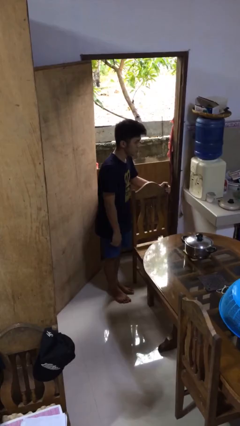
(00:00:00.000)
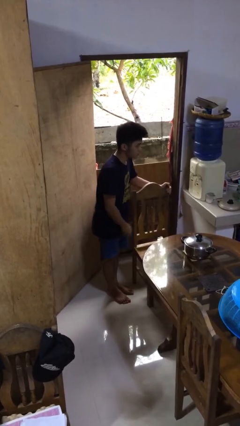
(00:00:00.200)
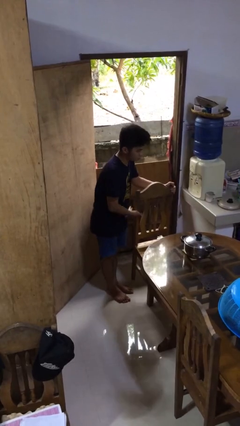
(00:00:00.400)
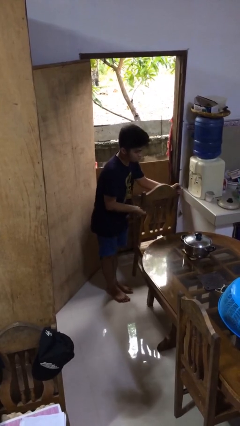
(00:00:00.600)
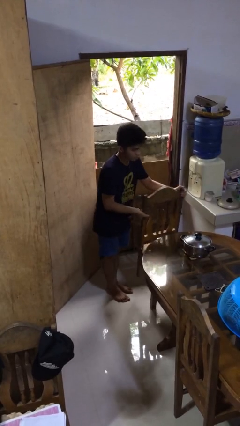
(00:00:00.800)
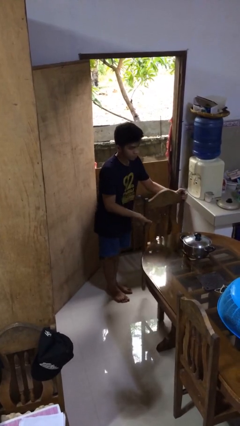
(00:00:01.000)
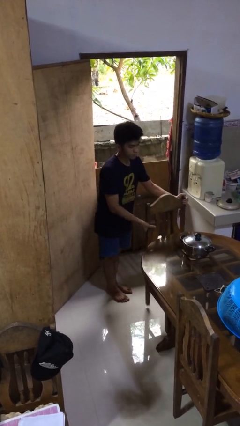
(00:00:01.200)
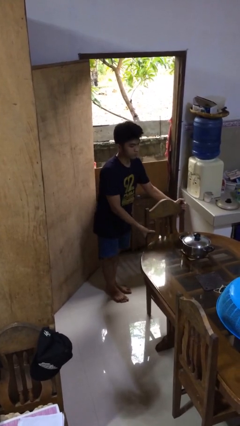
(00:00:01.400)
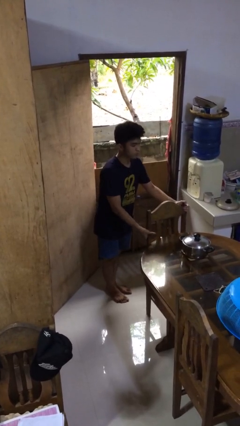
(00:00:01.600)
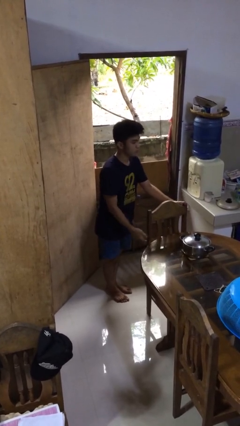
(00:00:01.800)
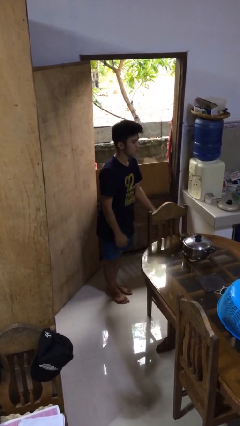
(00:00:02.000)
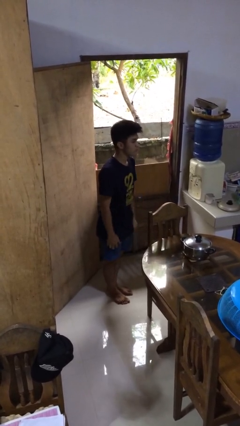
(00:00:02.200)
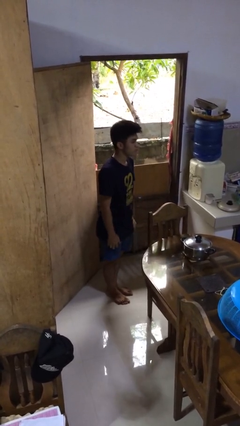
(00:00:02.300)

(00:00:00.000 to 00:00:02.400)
person pushes in chair

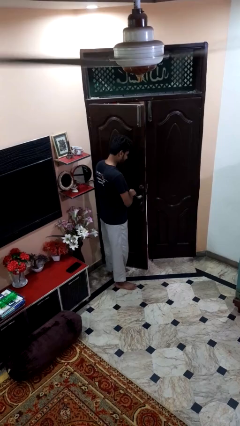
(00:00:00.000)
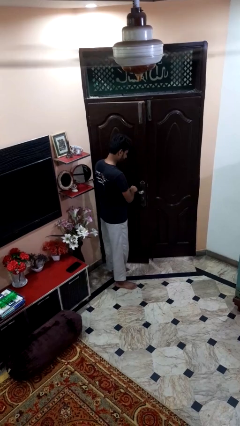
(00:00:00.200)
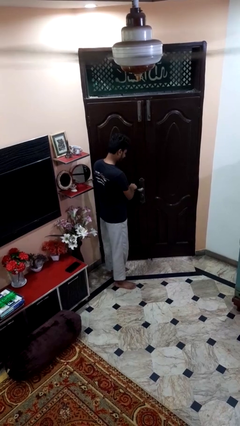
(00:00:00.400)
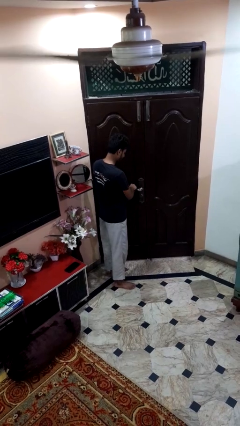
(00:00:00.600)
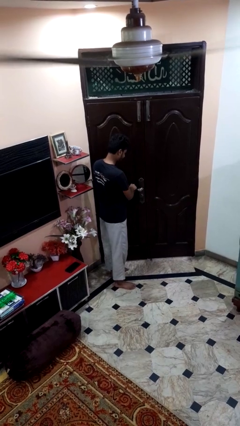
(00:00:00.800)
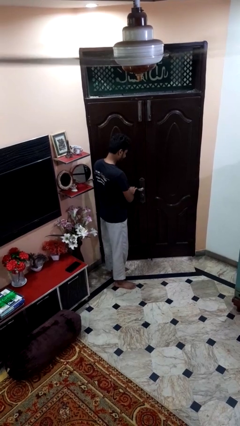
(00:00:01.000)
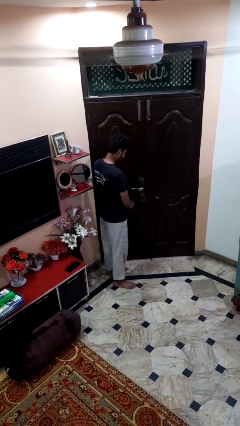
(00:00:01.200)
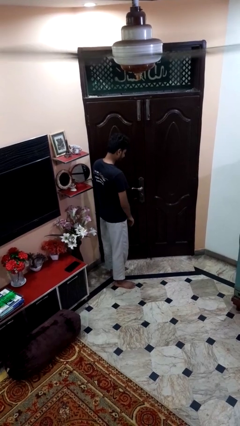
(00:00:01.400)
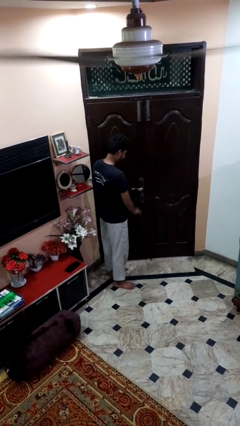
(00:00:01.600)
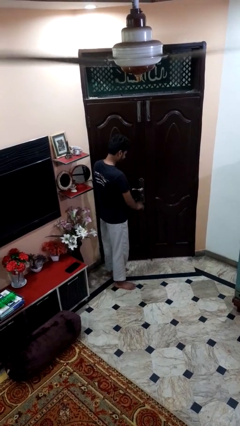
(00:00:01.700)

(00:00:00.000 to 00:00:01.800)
person closes facility door

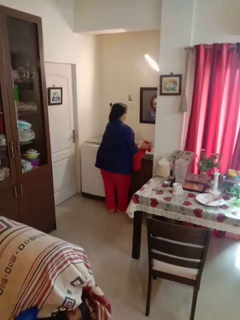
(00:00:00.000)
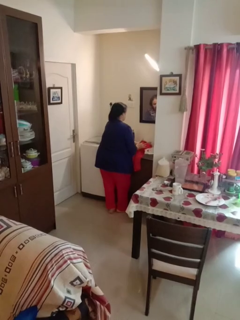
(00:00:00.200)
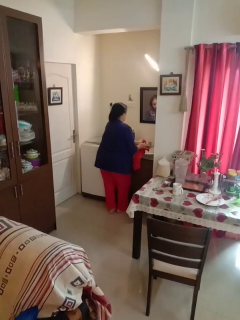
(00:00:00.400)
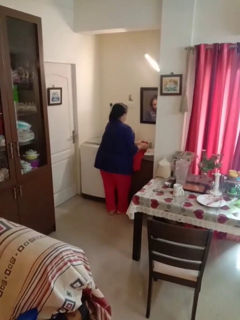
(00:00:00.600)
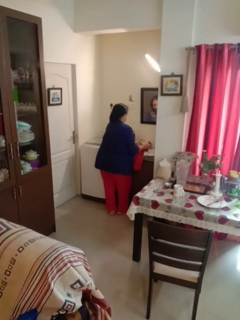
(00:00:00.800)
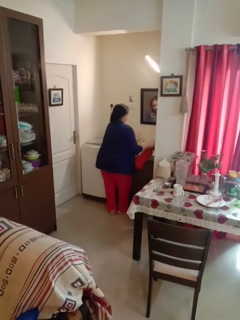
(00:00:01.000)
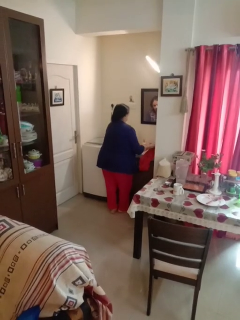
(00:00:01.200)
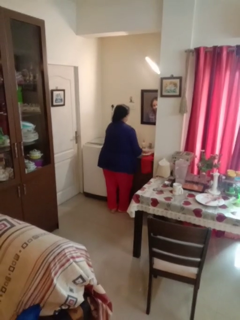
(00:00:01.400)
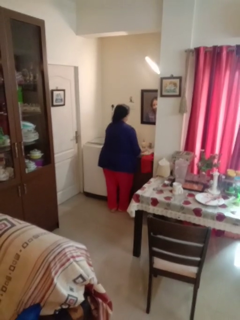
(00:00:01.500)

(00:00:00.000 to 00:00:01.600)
person dries hands with towel

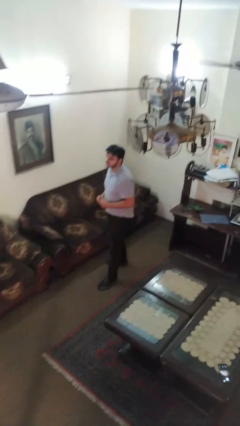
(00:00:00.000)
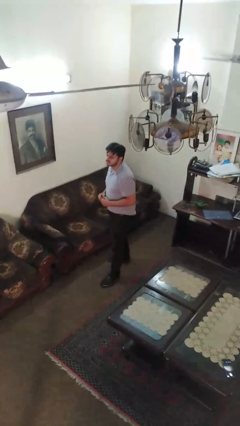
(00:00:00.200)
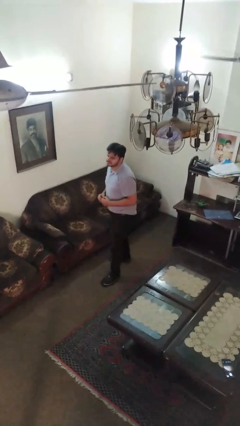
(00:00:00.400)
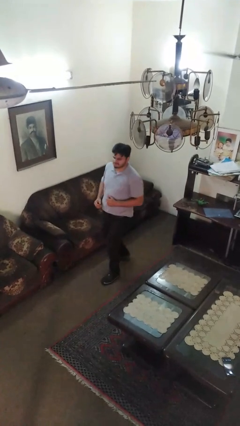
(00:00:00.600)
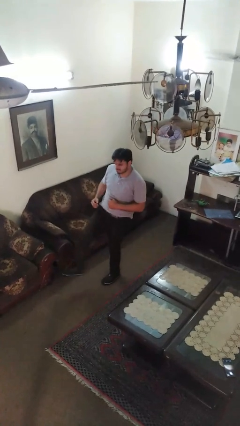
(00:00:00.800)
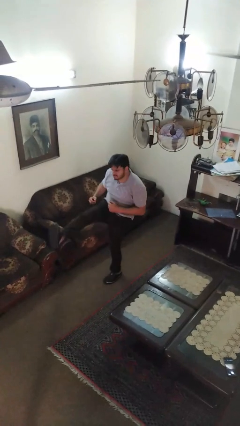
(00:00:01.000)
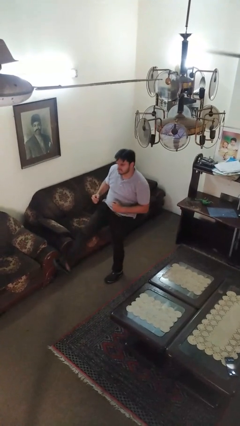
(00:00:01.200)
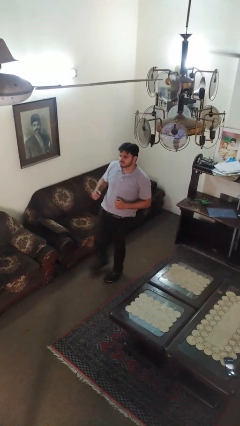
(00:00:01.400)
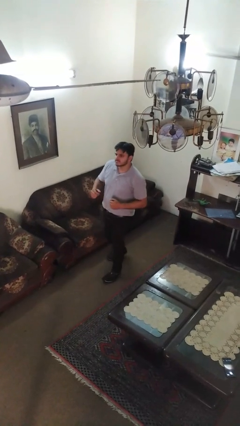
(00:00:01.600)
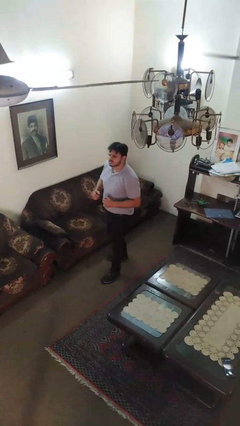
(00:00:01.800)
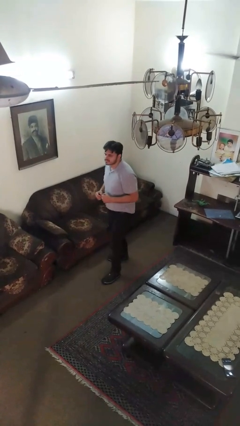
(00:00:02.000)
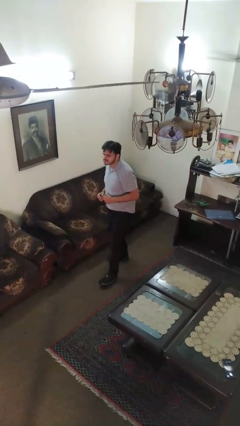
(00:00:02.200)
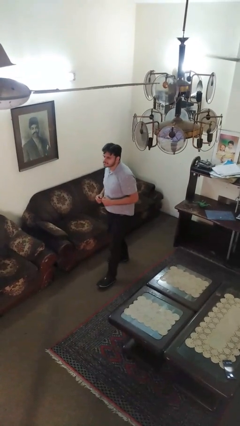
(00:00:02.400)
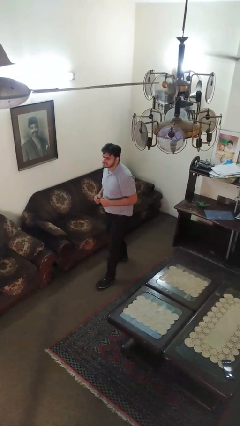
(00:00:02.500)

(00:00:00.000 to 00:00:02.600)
person karate kicks

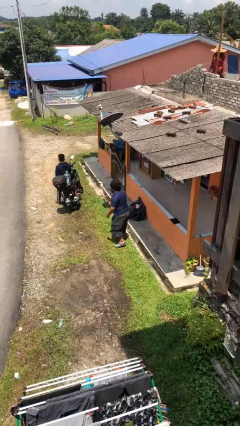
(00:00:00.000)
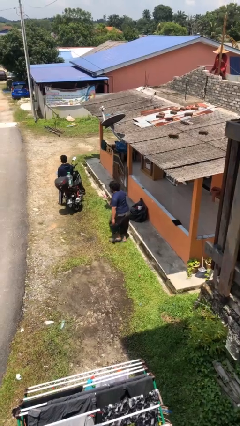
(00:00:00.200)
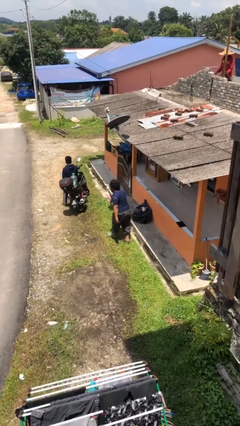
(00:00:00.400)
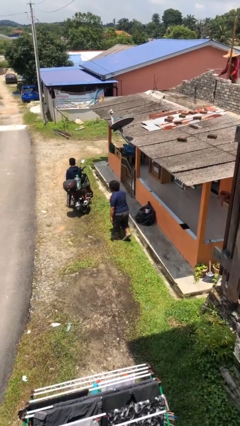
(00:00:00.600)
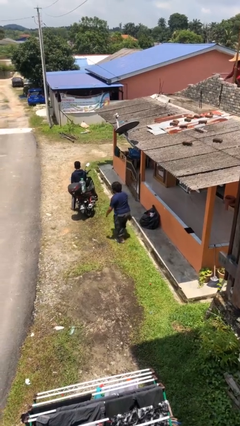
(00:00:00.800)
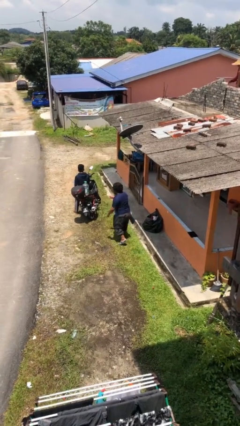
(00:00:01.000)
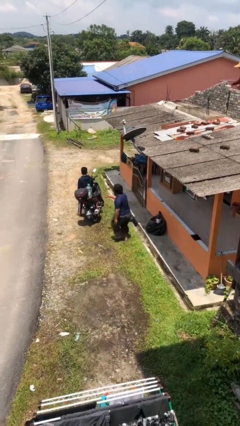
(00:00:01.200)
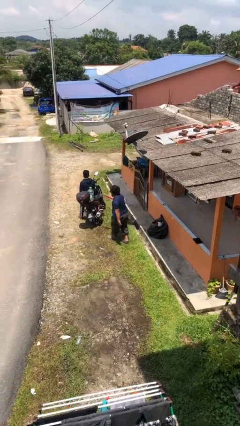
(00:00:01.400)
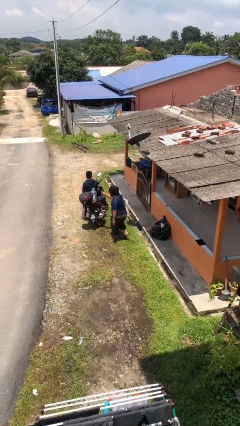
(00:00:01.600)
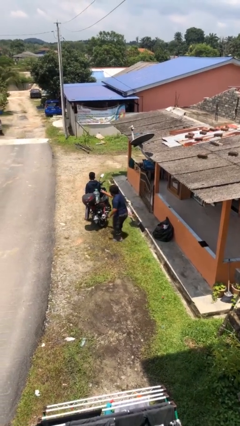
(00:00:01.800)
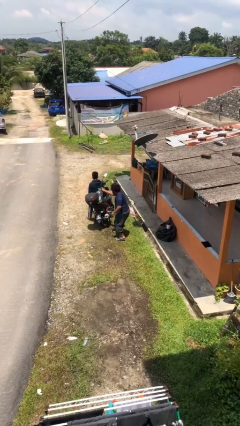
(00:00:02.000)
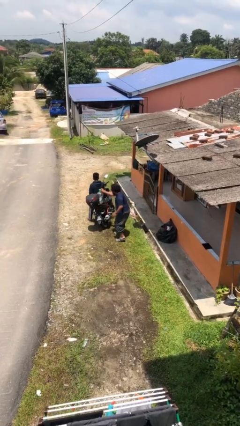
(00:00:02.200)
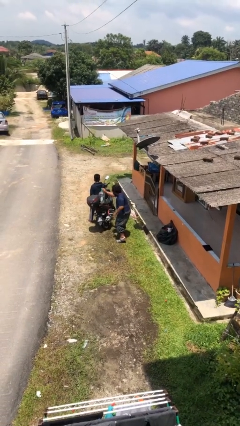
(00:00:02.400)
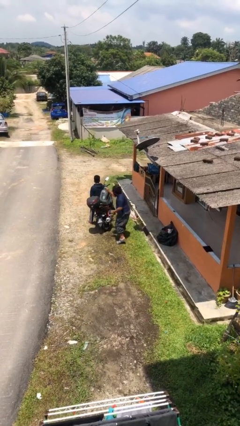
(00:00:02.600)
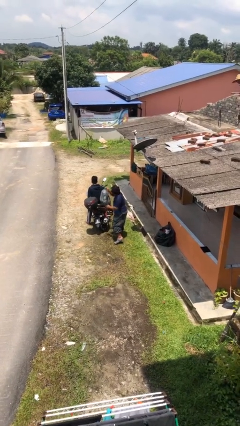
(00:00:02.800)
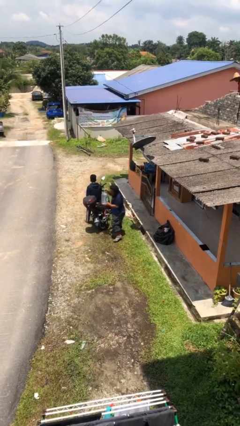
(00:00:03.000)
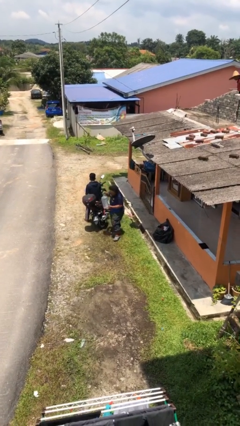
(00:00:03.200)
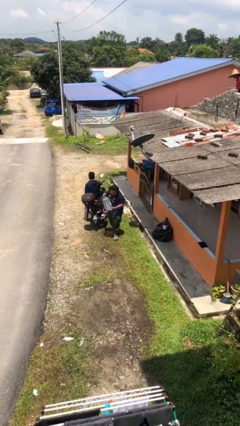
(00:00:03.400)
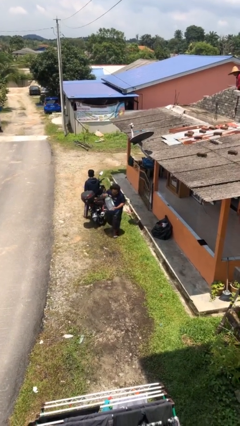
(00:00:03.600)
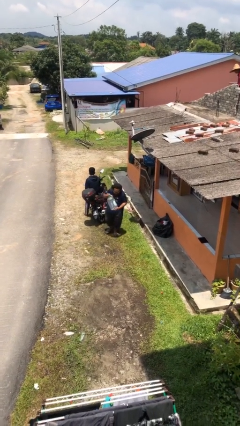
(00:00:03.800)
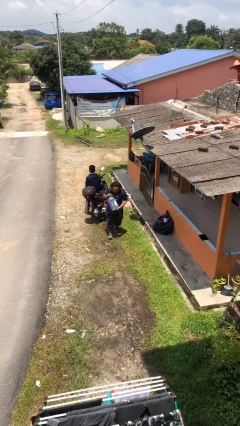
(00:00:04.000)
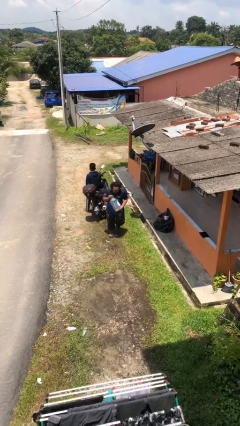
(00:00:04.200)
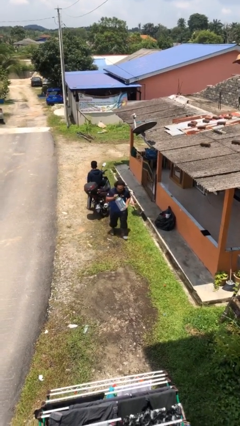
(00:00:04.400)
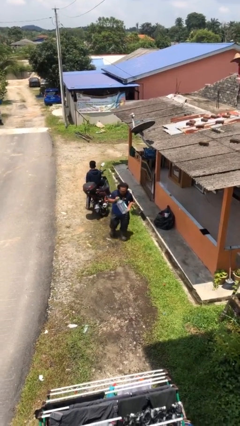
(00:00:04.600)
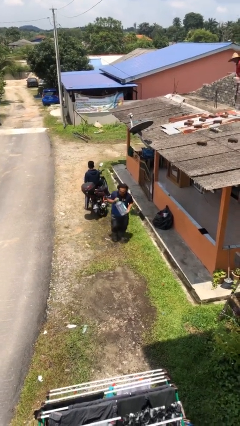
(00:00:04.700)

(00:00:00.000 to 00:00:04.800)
person steals object from person

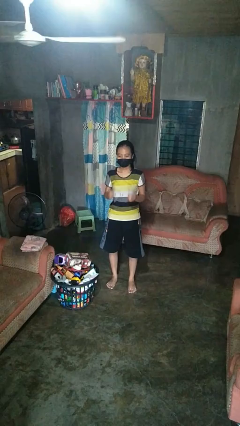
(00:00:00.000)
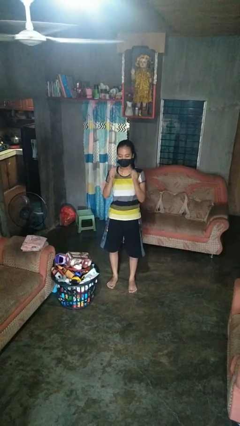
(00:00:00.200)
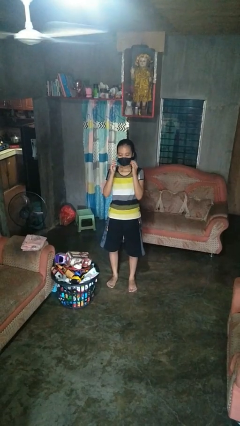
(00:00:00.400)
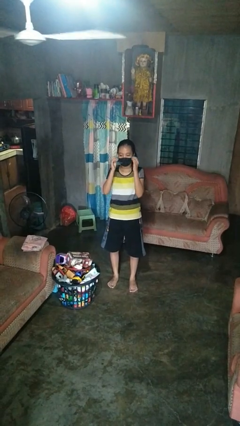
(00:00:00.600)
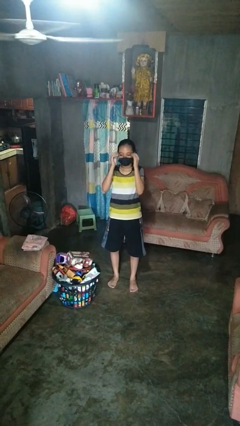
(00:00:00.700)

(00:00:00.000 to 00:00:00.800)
person puts on glasses

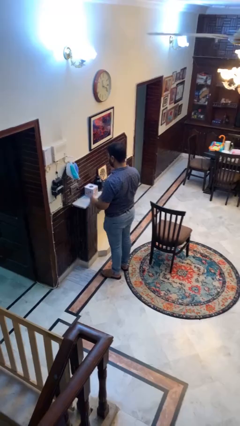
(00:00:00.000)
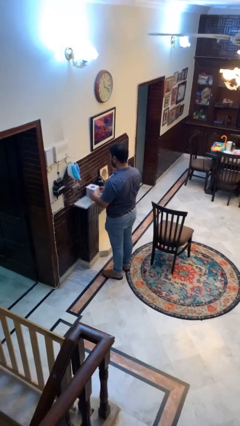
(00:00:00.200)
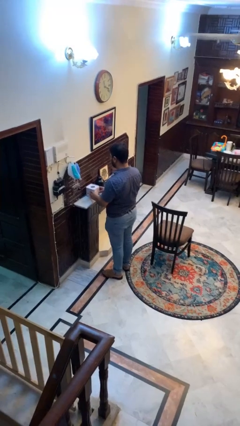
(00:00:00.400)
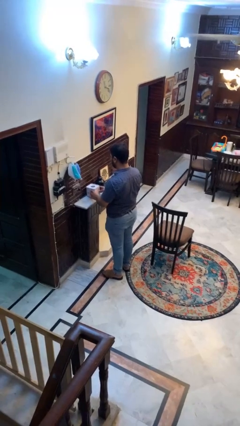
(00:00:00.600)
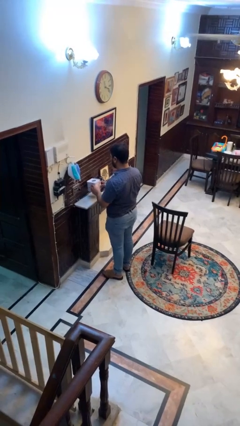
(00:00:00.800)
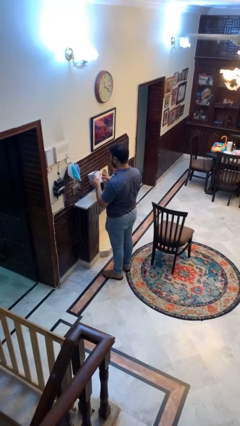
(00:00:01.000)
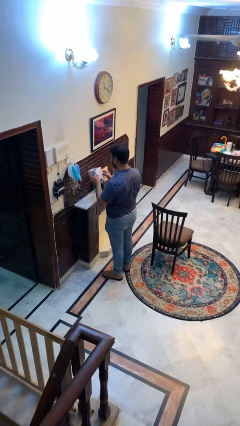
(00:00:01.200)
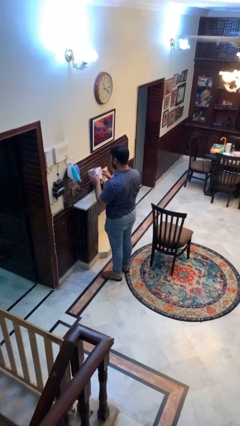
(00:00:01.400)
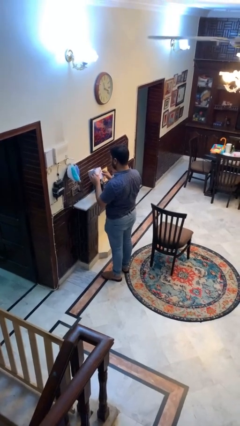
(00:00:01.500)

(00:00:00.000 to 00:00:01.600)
person picks up object from countertop

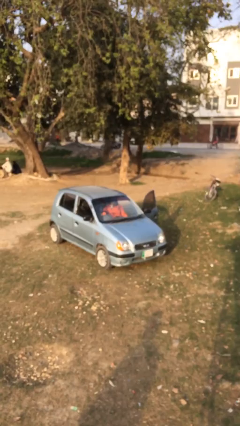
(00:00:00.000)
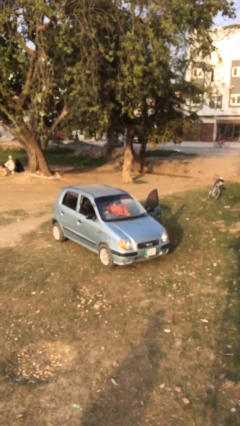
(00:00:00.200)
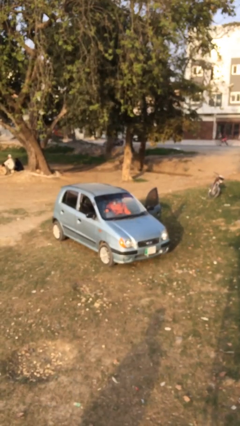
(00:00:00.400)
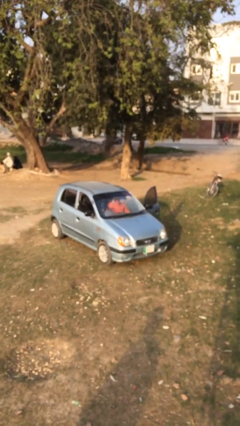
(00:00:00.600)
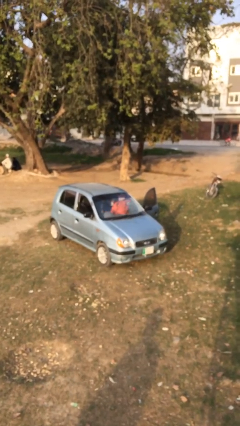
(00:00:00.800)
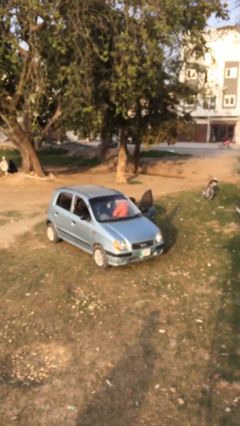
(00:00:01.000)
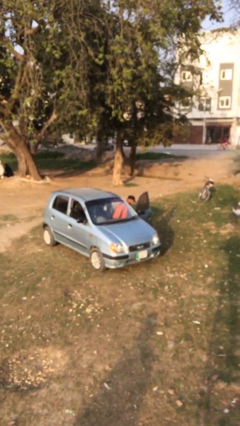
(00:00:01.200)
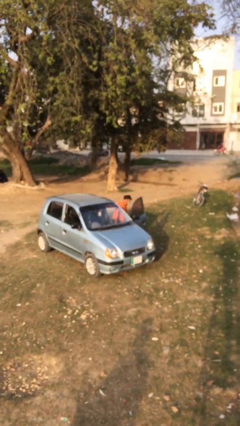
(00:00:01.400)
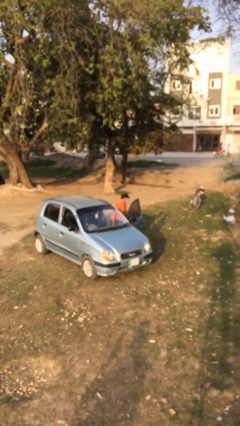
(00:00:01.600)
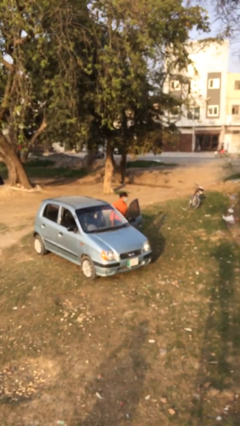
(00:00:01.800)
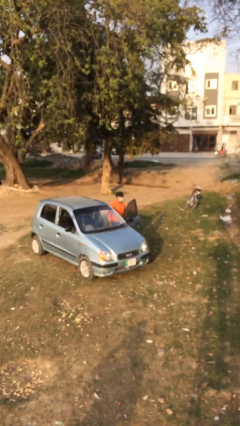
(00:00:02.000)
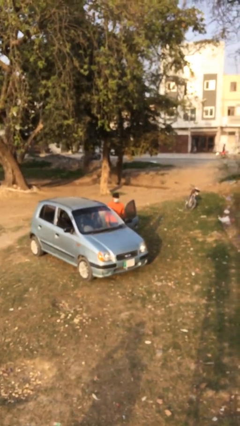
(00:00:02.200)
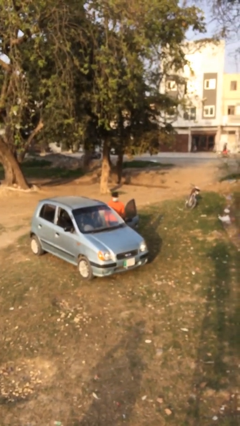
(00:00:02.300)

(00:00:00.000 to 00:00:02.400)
person exits car
